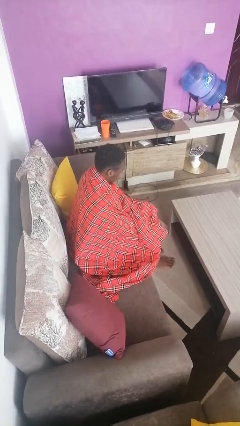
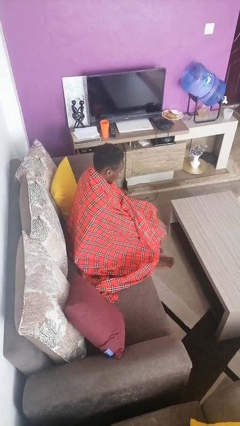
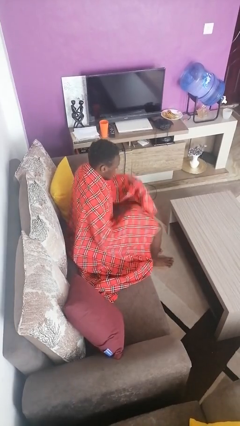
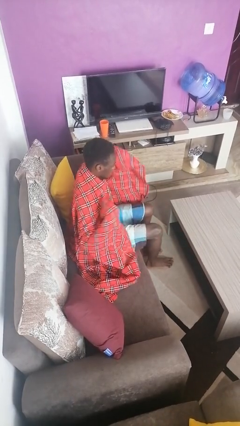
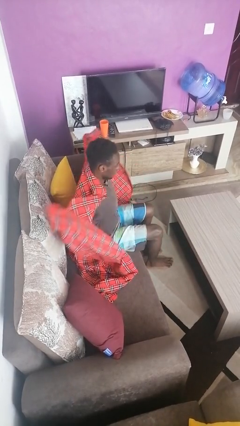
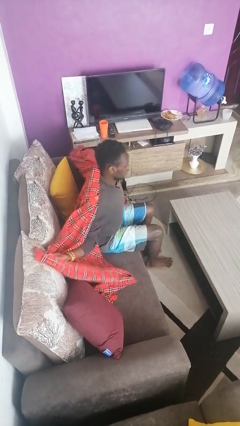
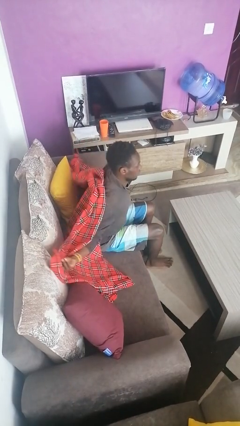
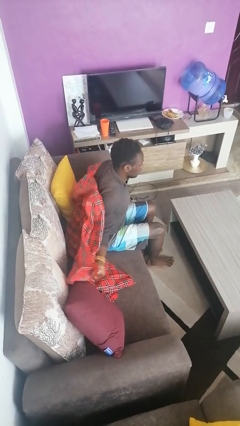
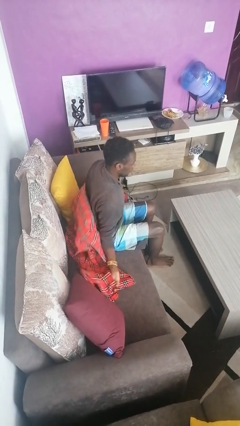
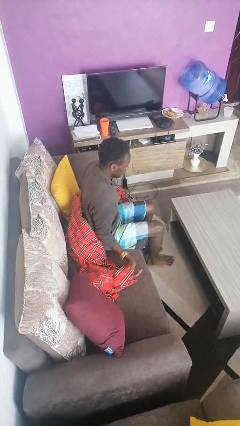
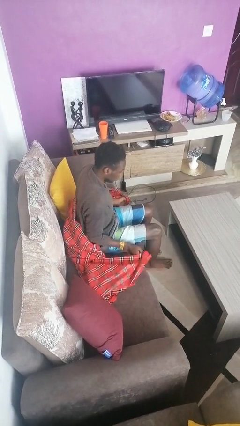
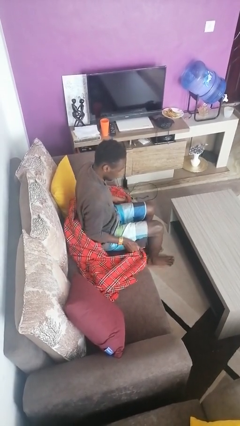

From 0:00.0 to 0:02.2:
person uncovers with blanket

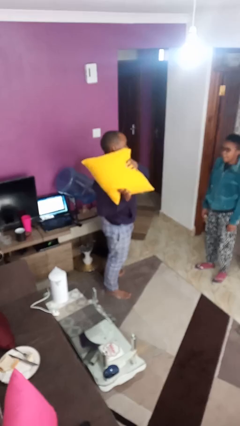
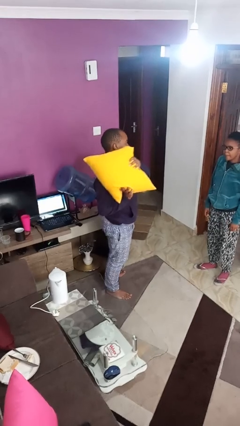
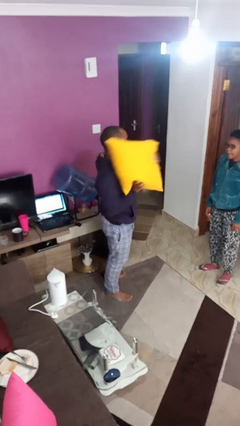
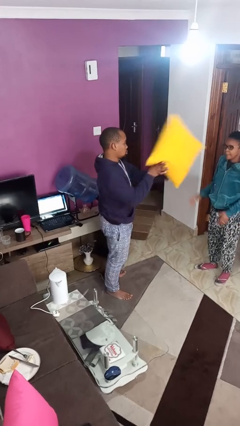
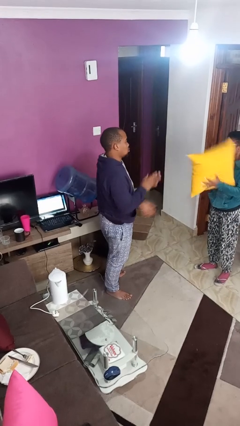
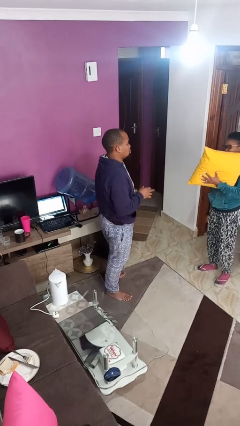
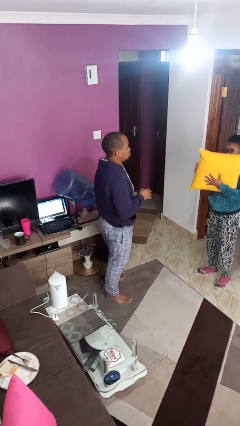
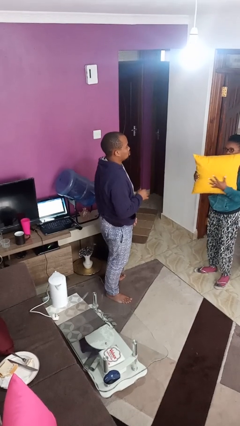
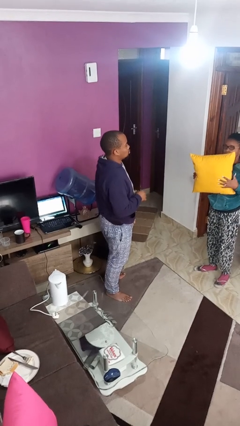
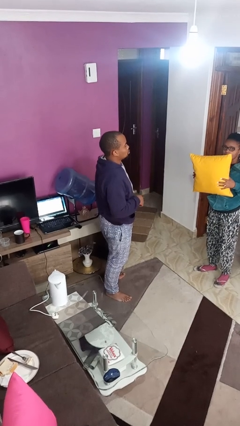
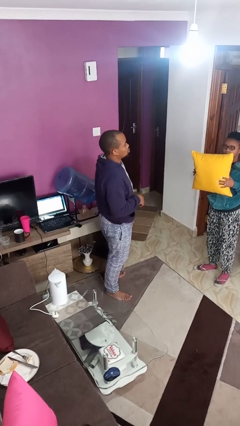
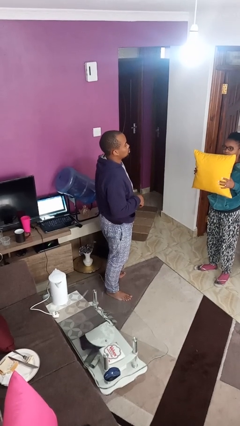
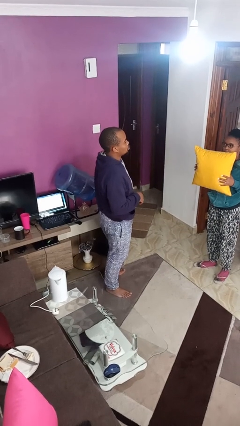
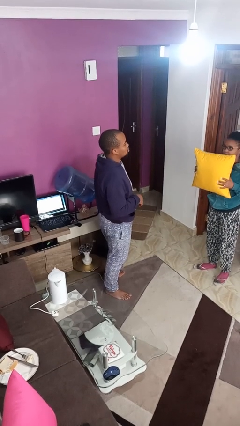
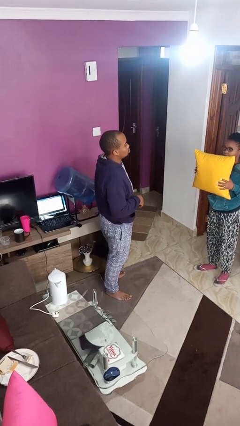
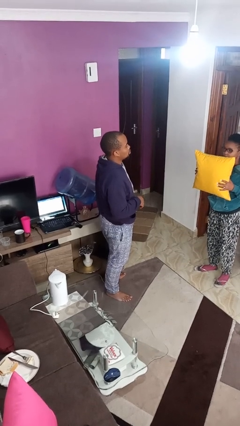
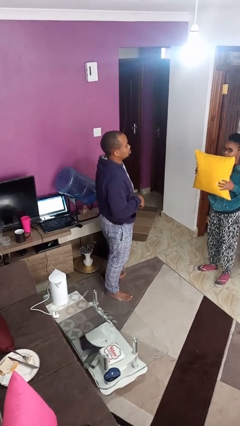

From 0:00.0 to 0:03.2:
person throws object to person

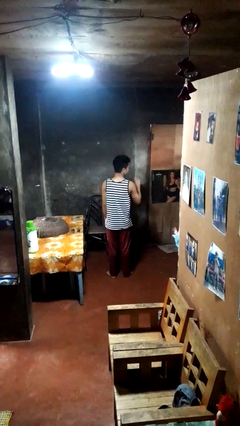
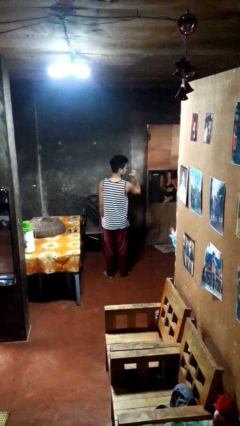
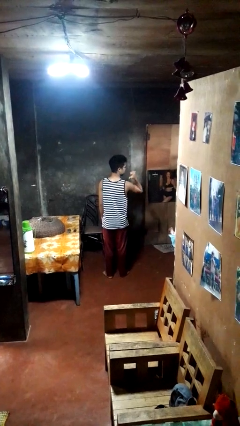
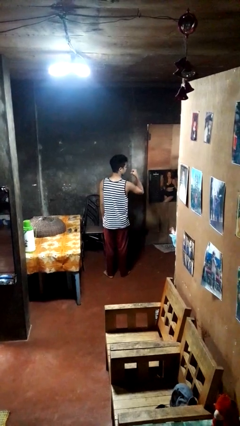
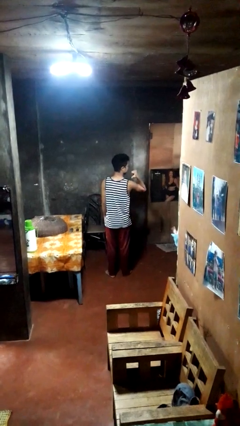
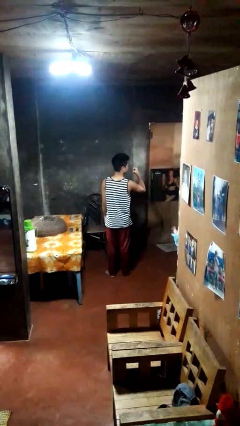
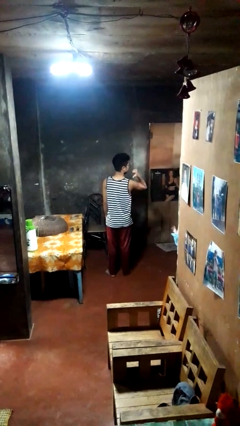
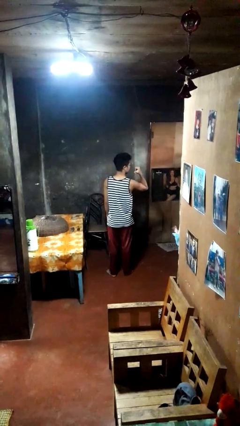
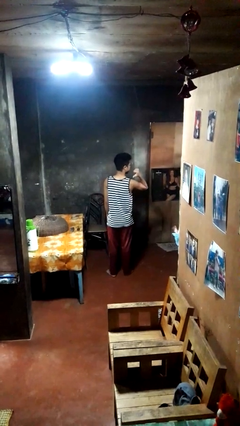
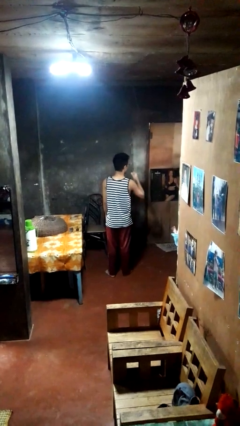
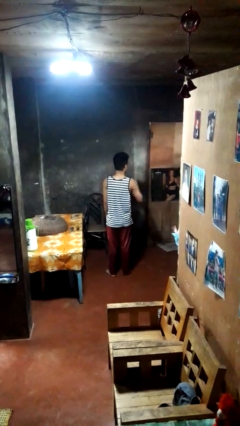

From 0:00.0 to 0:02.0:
person gestures behind me

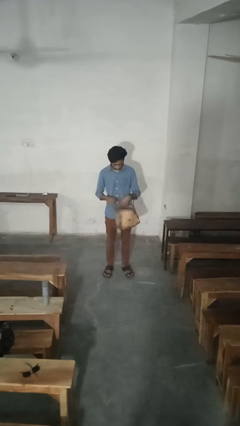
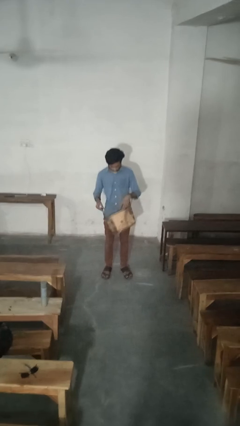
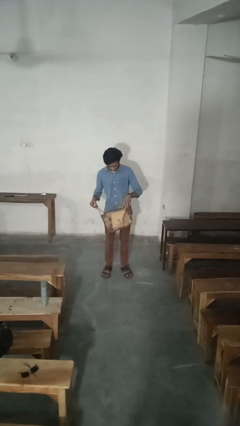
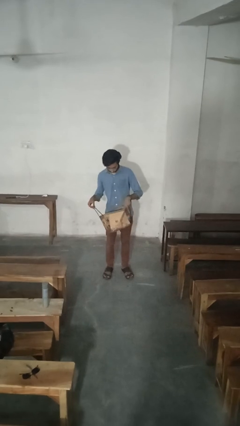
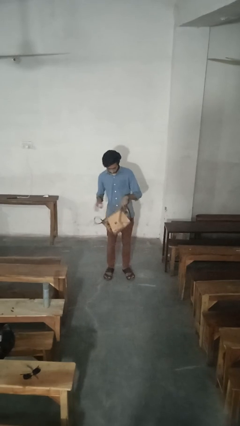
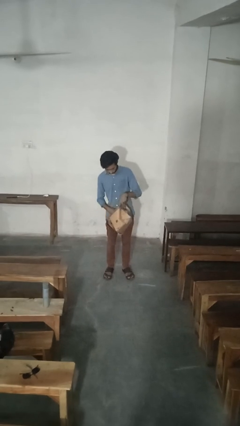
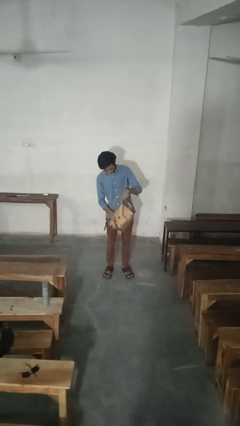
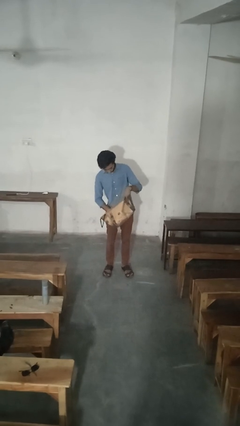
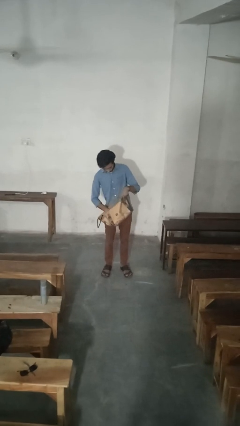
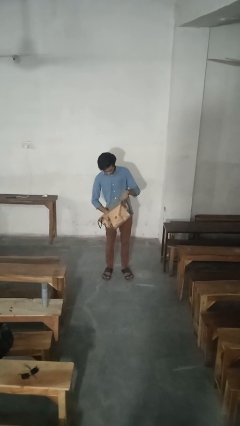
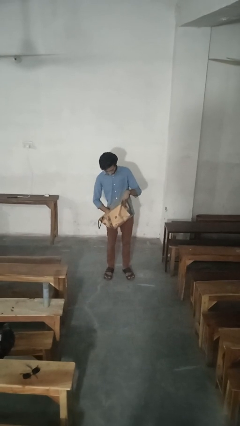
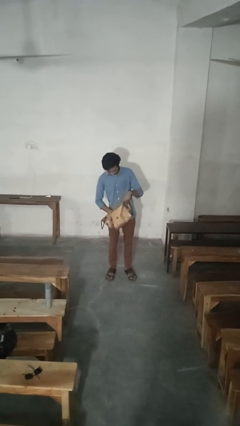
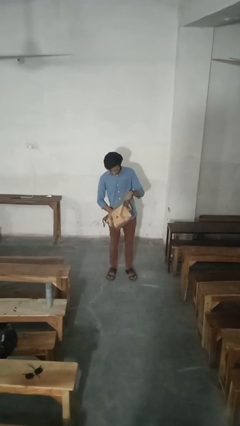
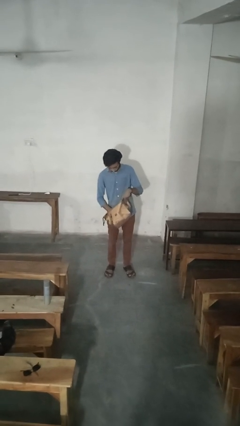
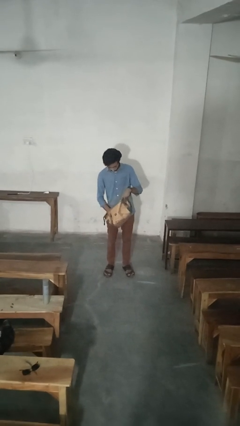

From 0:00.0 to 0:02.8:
person searches in purse

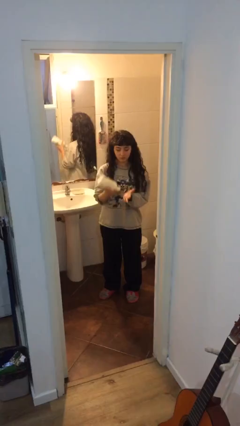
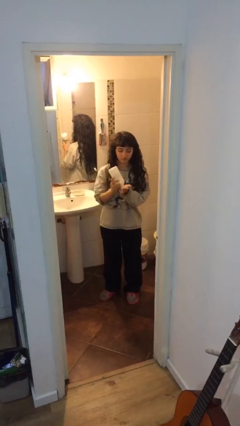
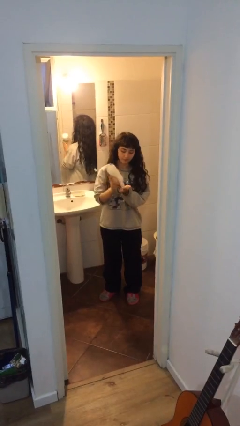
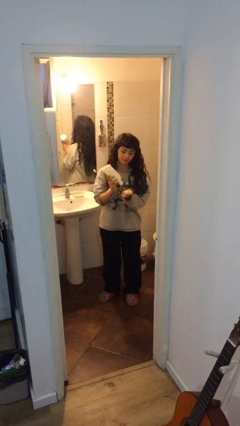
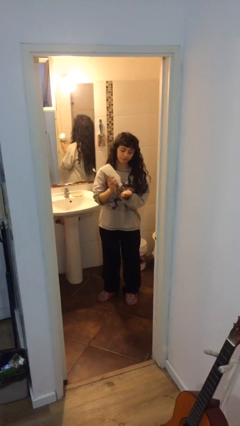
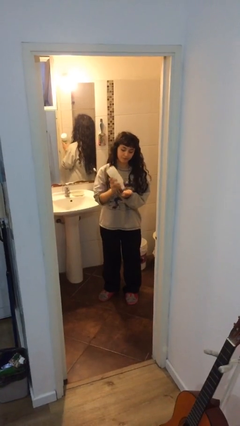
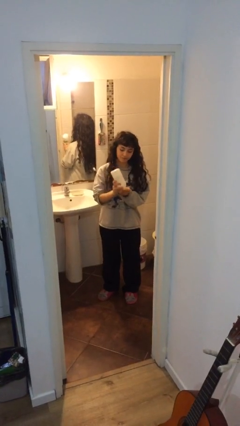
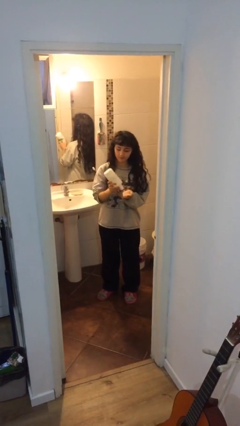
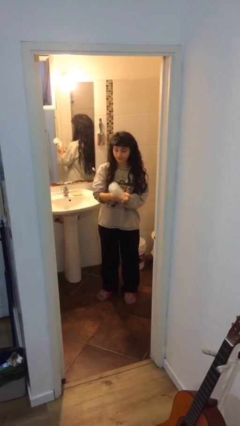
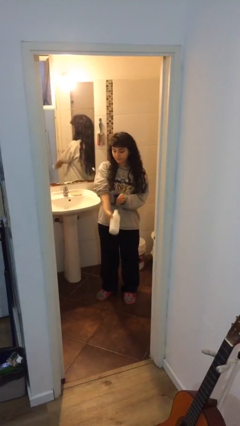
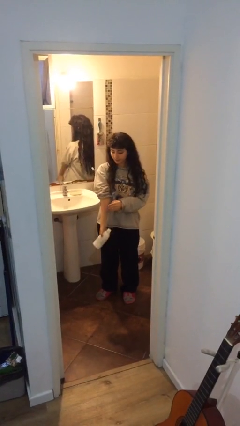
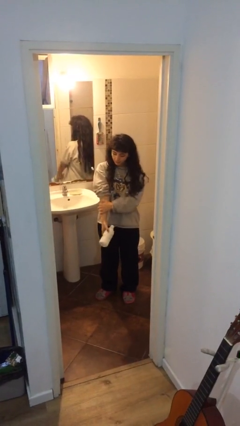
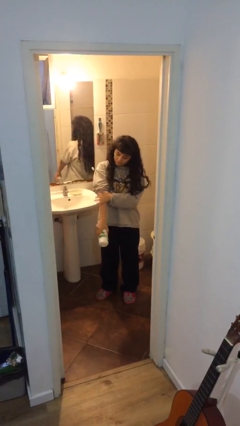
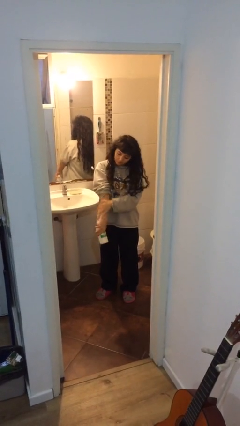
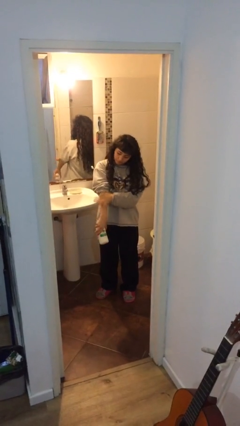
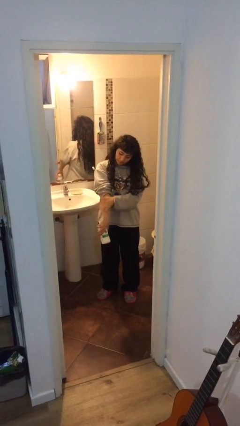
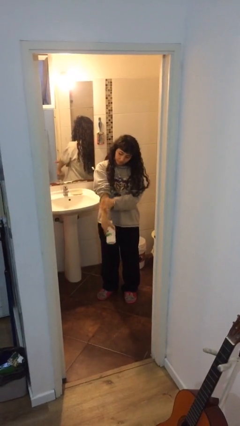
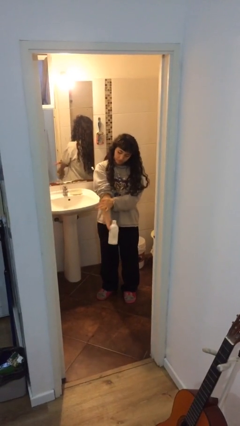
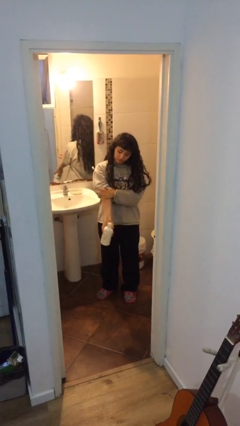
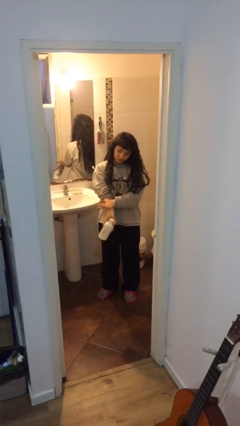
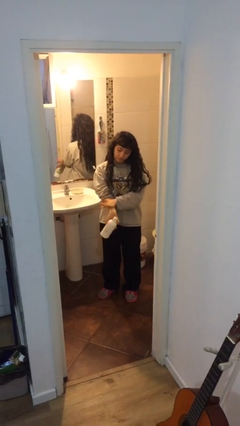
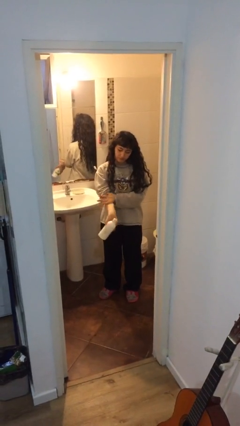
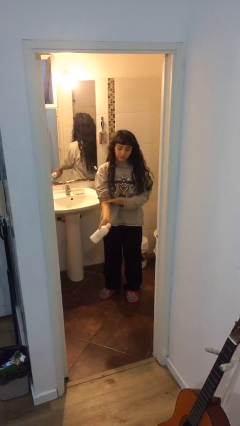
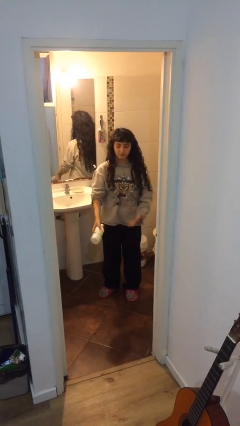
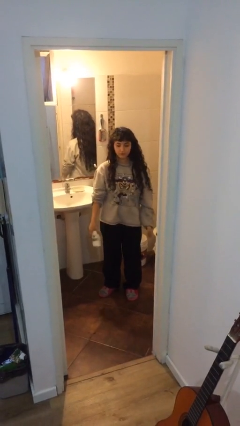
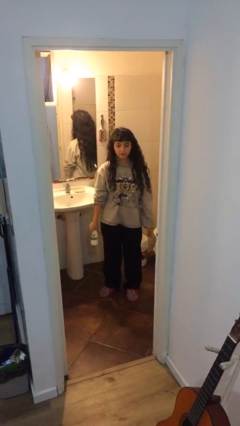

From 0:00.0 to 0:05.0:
person applies sunscreen

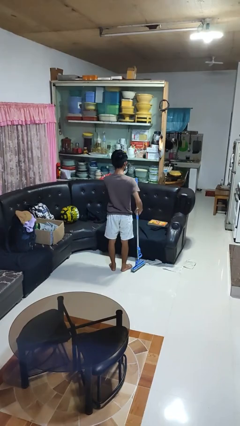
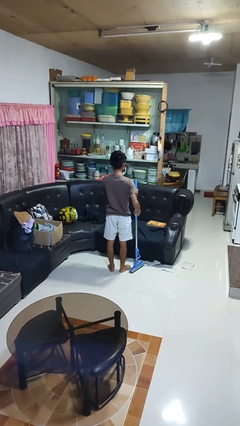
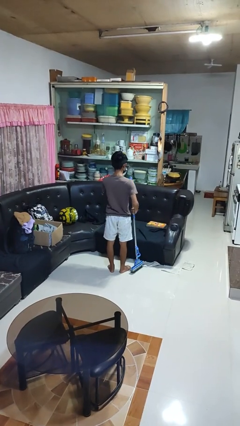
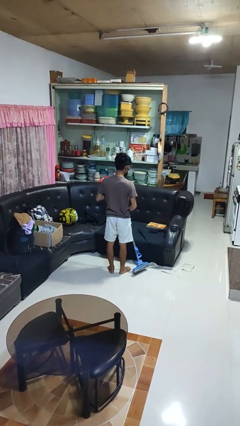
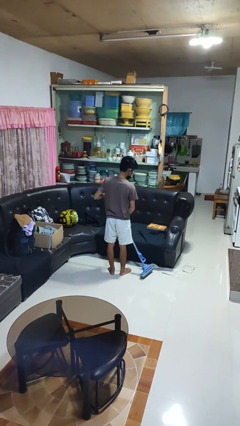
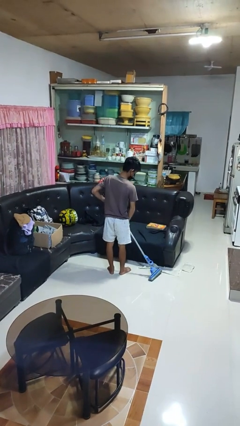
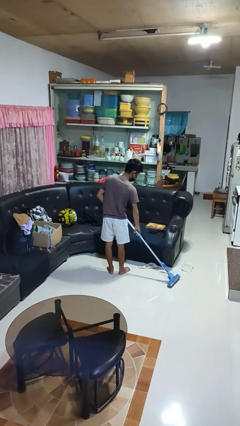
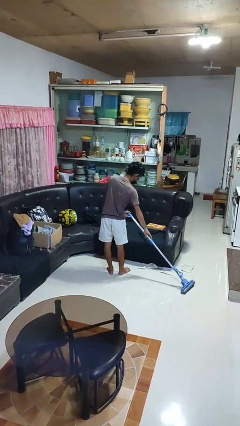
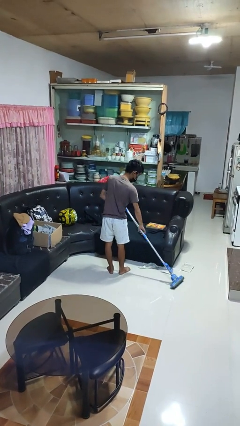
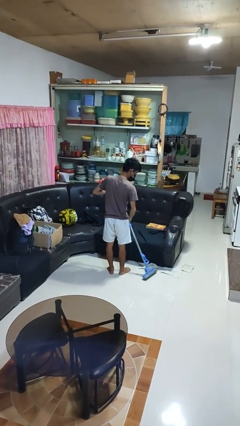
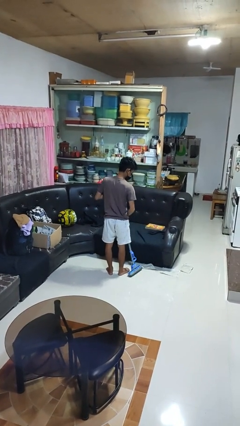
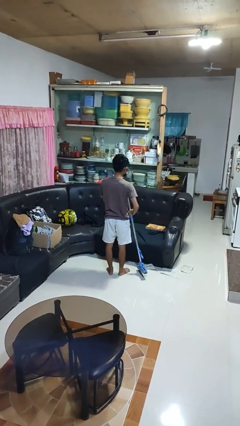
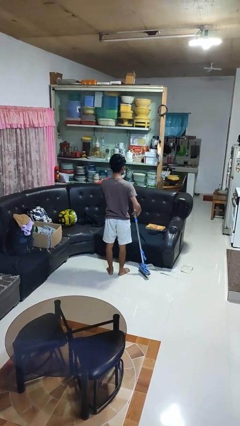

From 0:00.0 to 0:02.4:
person mops
